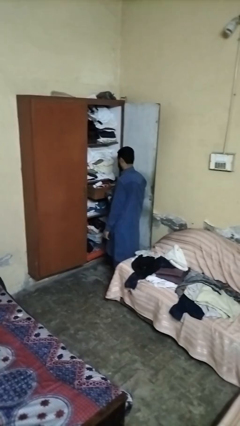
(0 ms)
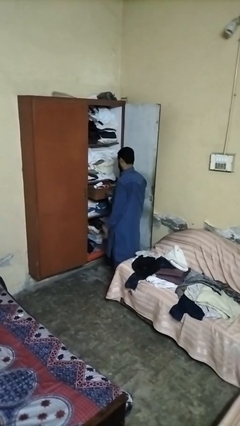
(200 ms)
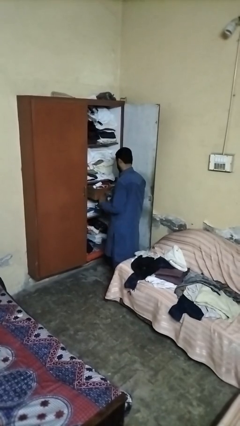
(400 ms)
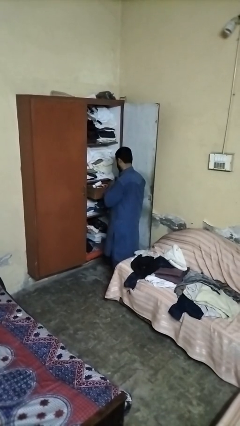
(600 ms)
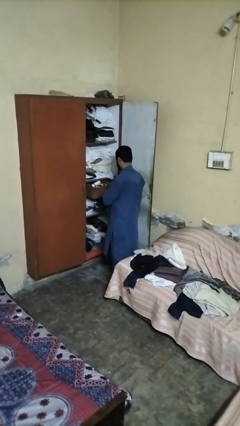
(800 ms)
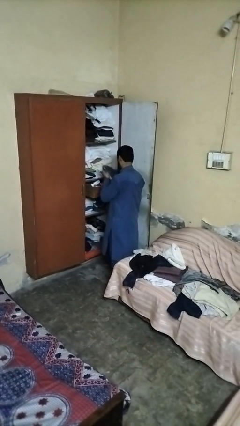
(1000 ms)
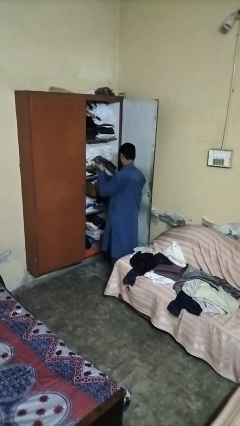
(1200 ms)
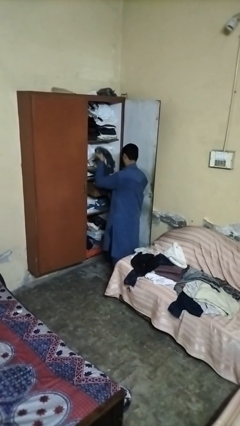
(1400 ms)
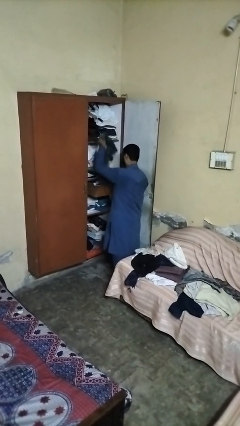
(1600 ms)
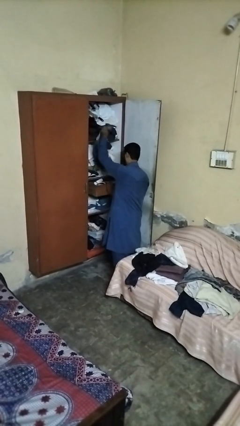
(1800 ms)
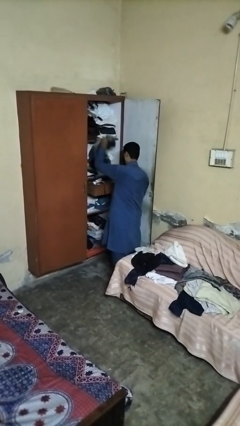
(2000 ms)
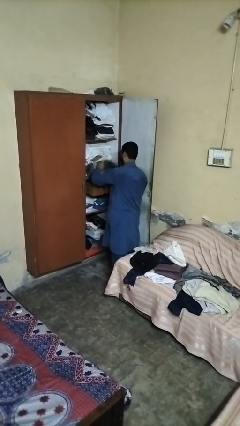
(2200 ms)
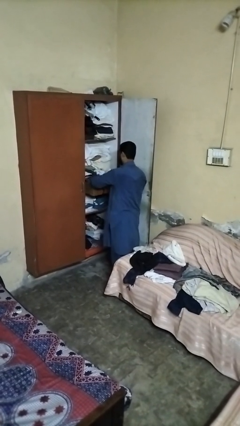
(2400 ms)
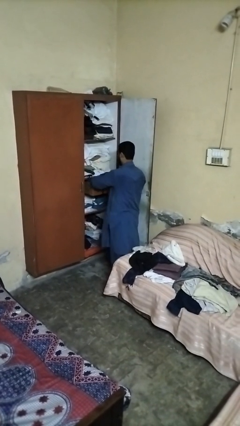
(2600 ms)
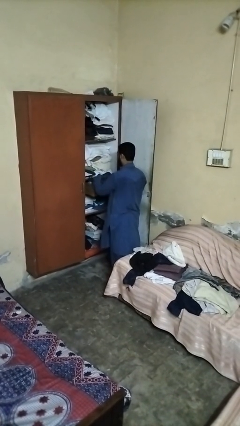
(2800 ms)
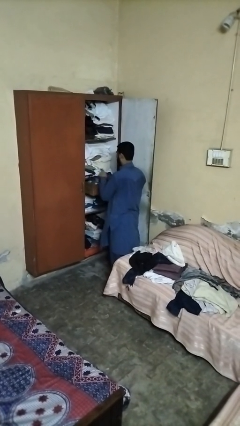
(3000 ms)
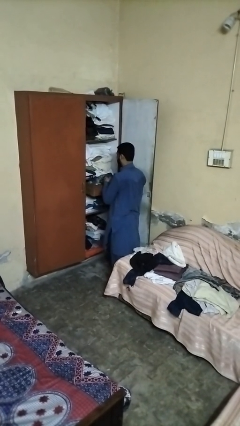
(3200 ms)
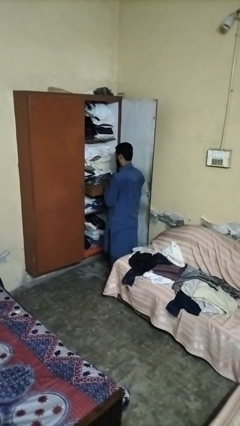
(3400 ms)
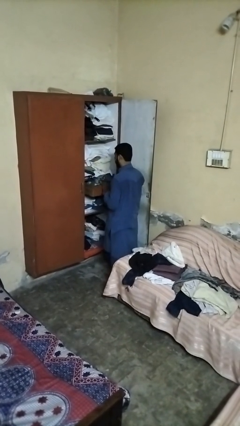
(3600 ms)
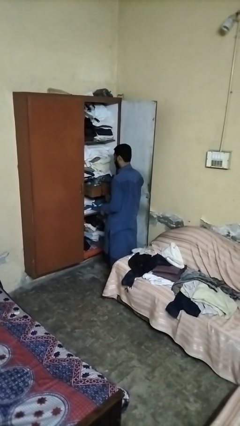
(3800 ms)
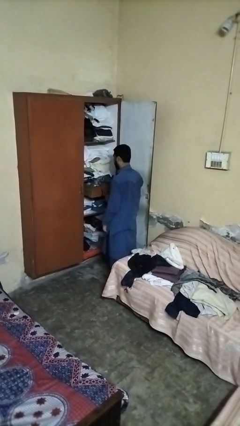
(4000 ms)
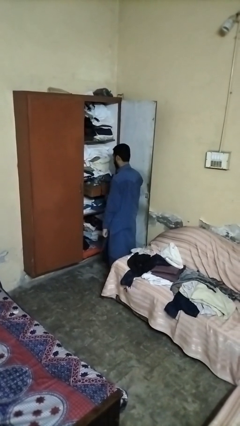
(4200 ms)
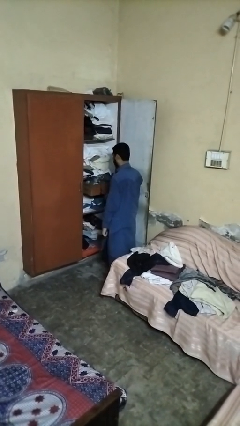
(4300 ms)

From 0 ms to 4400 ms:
person puts clothes into dresser

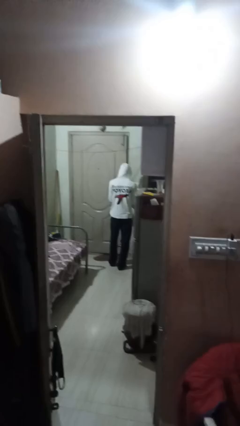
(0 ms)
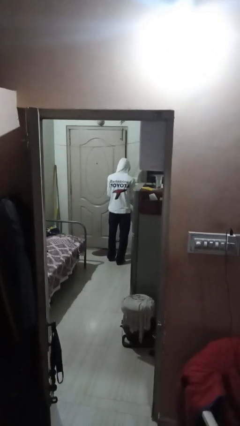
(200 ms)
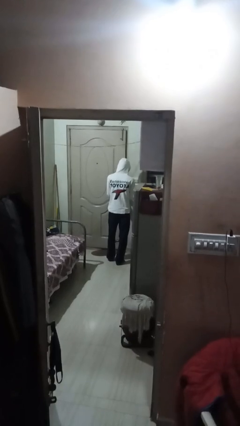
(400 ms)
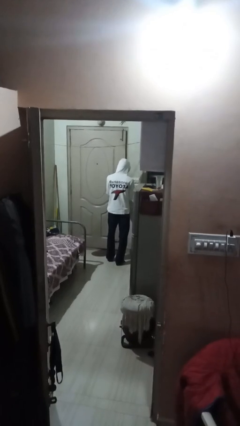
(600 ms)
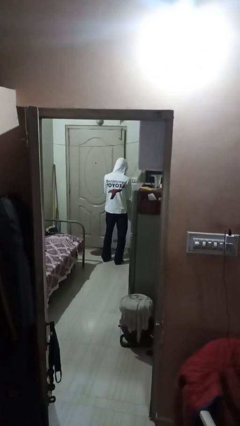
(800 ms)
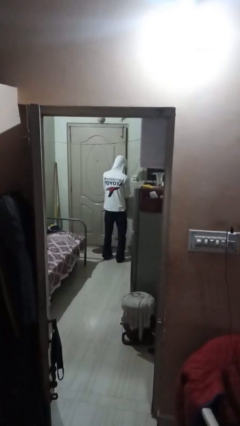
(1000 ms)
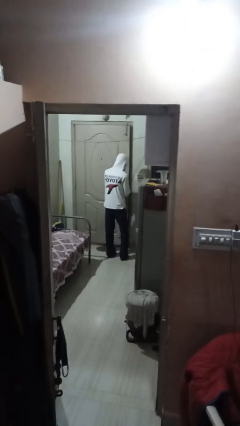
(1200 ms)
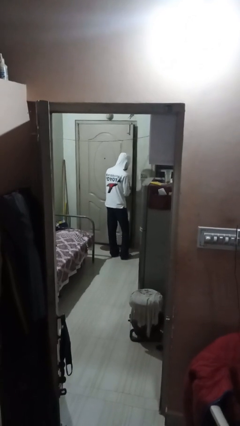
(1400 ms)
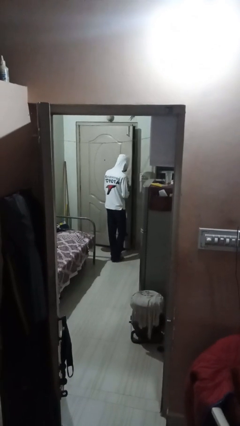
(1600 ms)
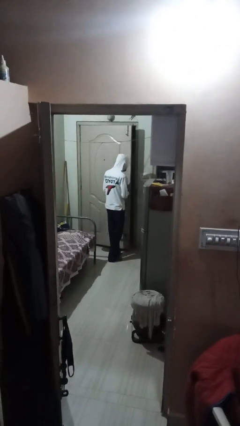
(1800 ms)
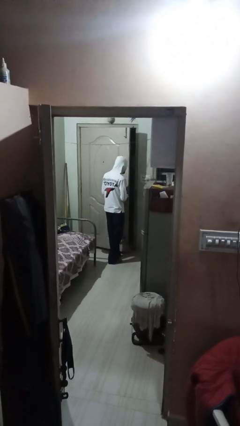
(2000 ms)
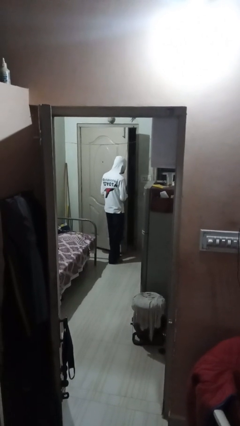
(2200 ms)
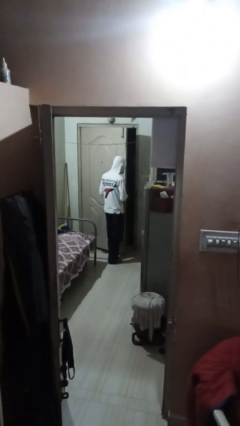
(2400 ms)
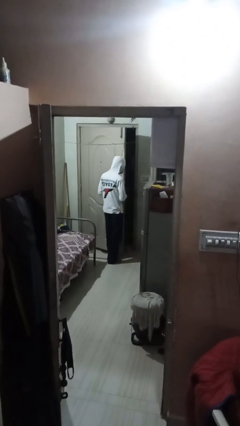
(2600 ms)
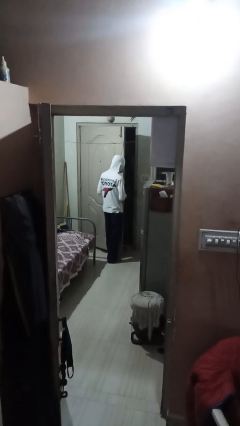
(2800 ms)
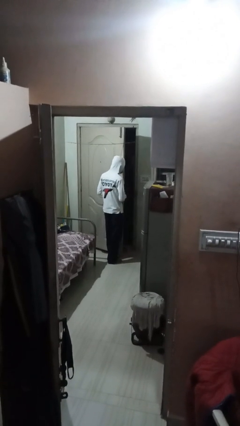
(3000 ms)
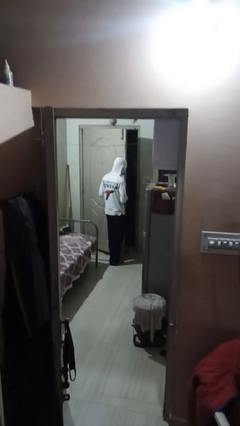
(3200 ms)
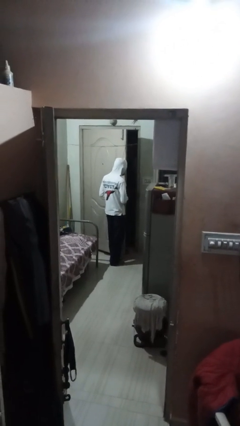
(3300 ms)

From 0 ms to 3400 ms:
person opens facility door

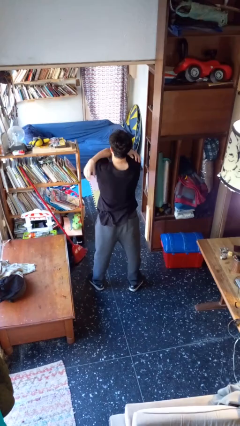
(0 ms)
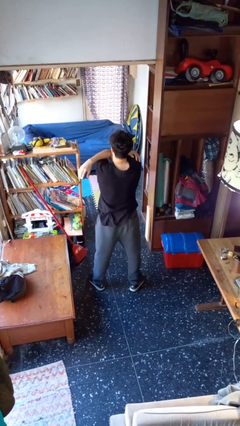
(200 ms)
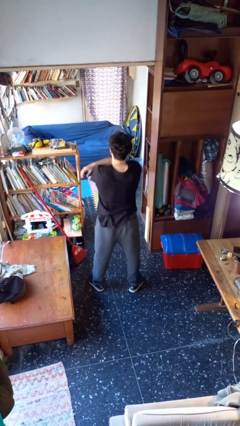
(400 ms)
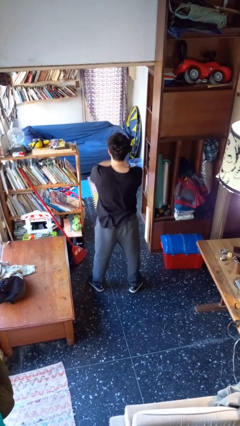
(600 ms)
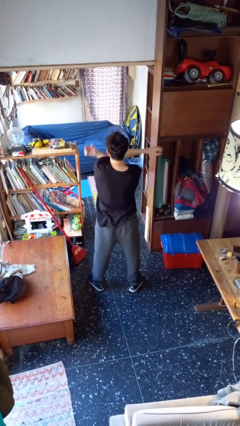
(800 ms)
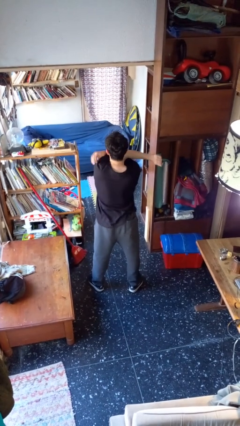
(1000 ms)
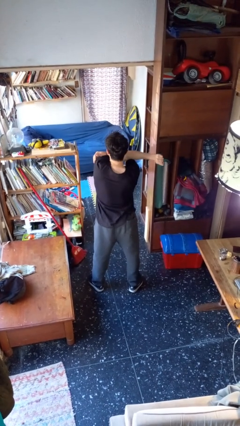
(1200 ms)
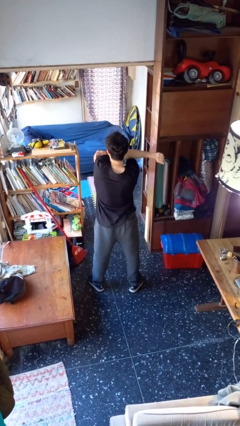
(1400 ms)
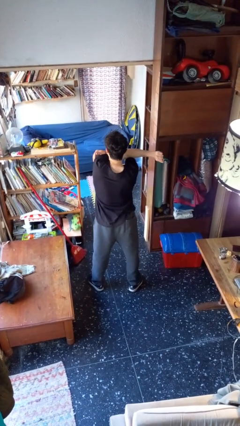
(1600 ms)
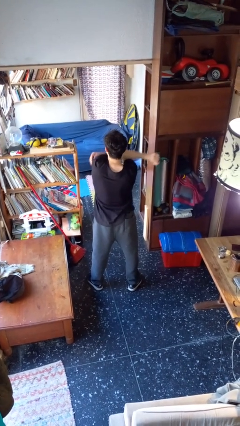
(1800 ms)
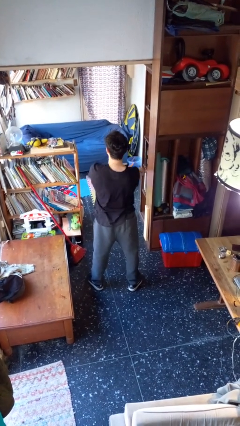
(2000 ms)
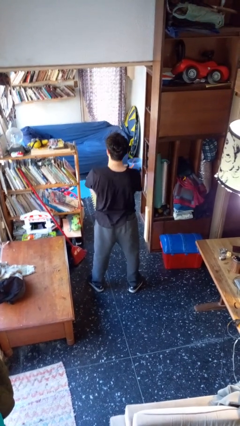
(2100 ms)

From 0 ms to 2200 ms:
person stretches arms to side

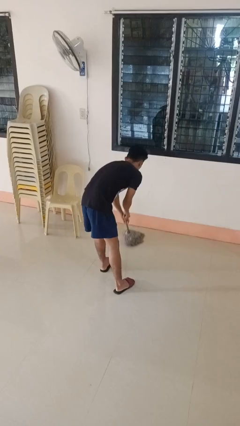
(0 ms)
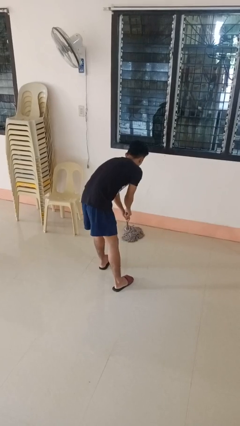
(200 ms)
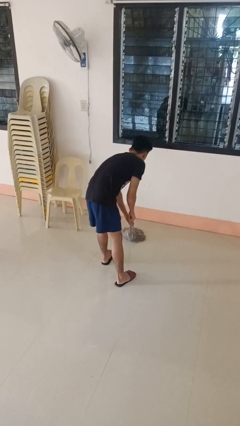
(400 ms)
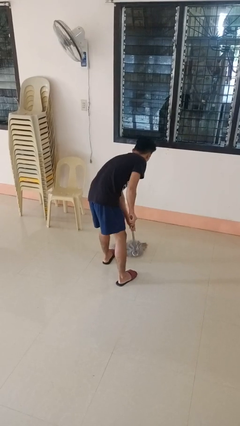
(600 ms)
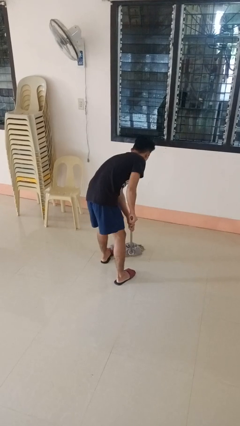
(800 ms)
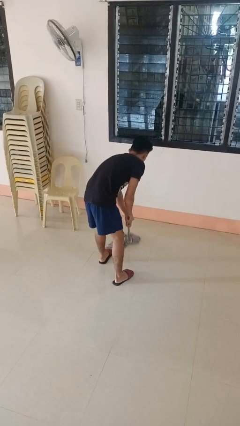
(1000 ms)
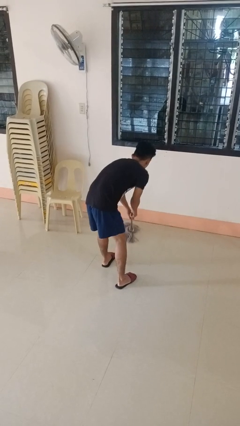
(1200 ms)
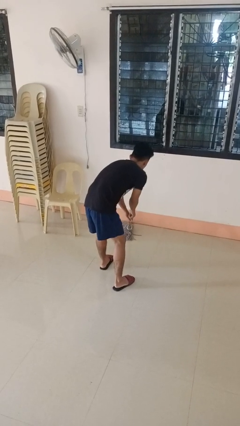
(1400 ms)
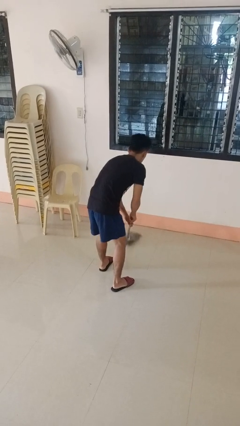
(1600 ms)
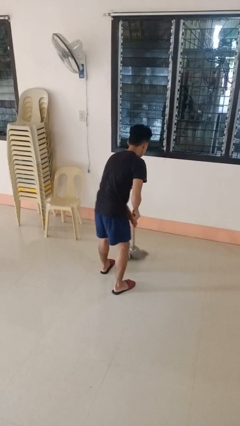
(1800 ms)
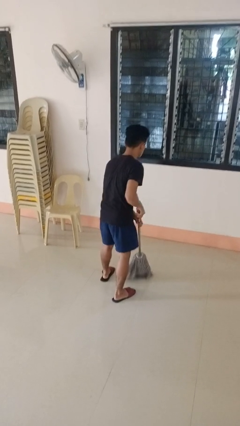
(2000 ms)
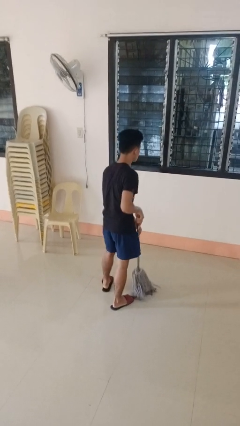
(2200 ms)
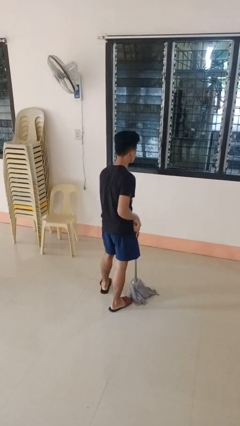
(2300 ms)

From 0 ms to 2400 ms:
person mops

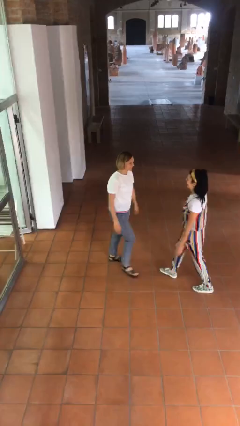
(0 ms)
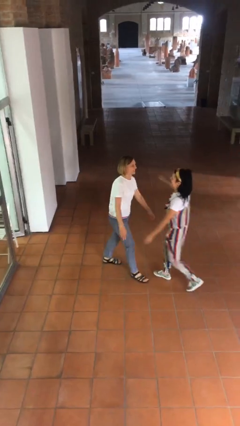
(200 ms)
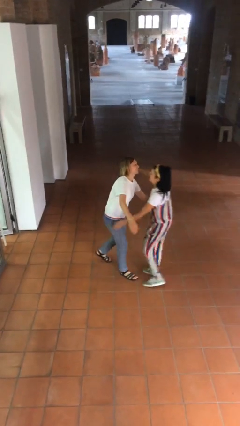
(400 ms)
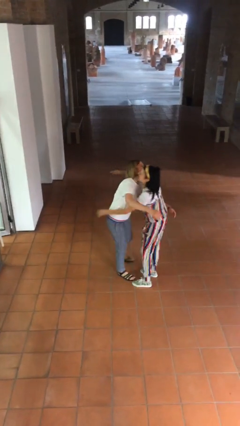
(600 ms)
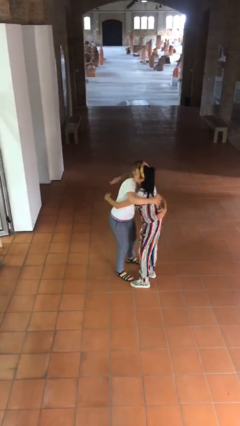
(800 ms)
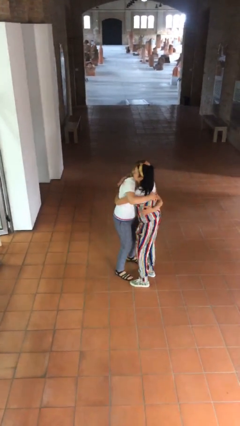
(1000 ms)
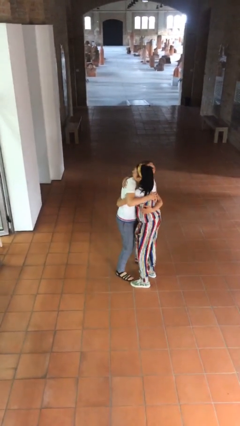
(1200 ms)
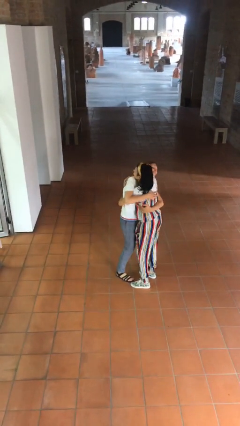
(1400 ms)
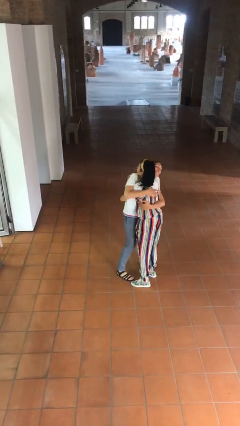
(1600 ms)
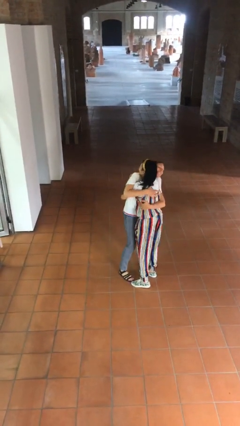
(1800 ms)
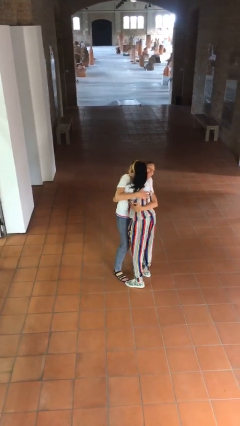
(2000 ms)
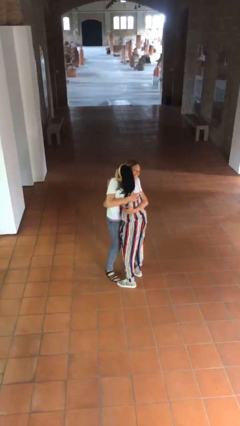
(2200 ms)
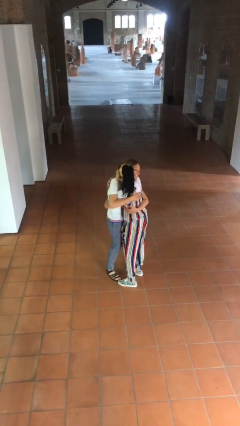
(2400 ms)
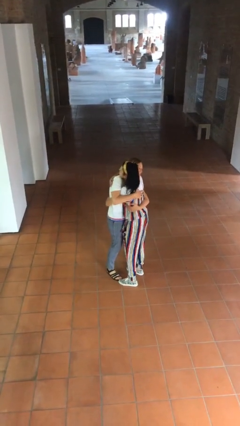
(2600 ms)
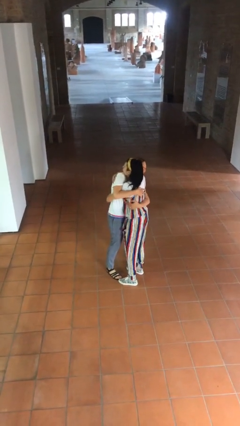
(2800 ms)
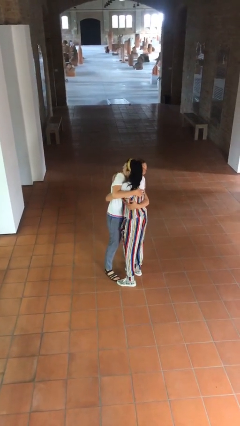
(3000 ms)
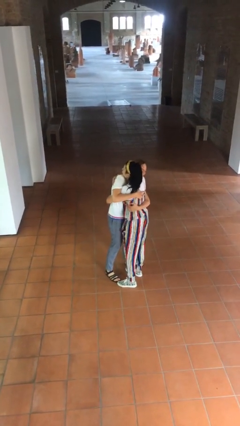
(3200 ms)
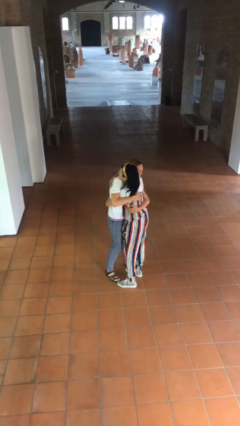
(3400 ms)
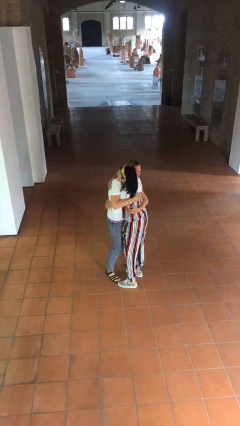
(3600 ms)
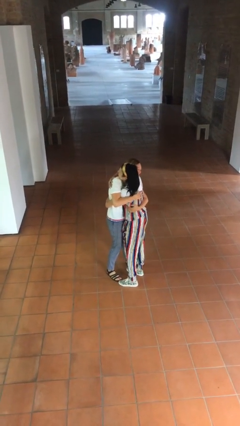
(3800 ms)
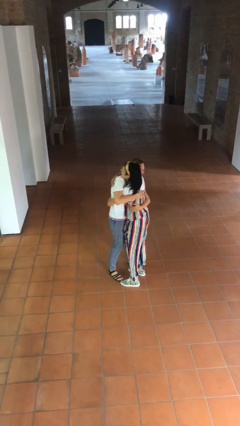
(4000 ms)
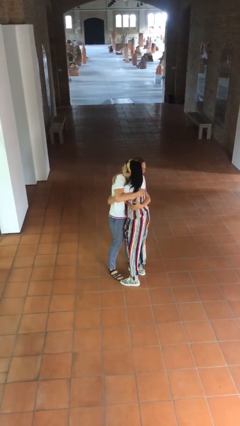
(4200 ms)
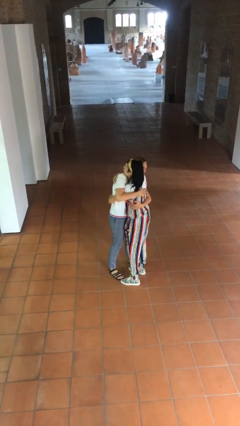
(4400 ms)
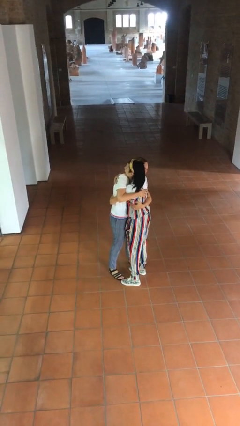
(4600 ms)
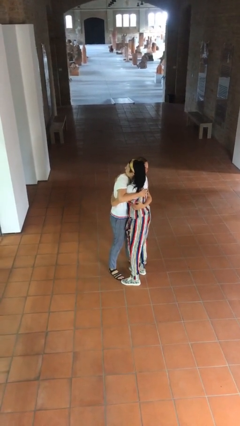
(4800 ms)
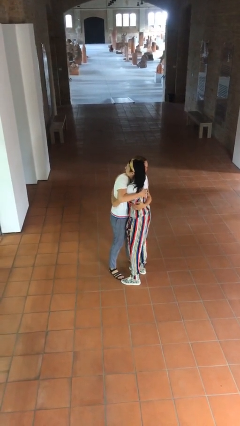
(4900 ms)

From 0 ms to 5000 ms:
person embraces person

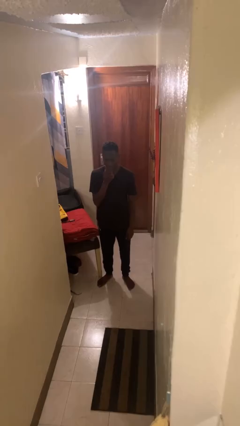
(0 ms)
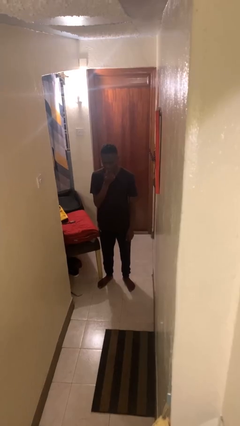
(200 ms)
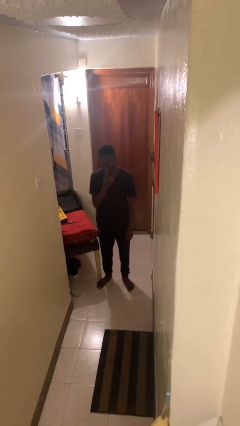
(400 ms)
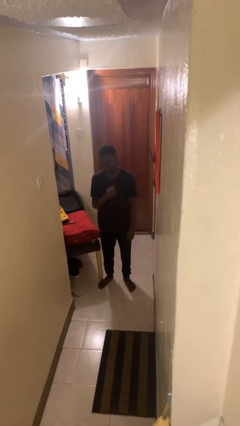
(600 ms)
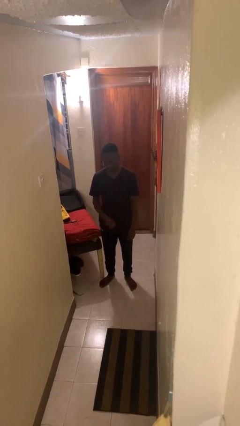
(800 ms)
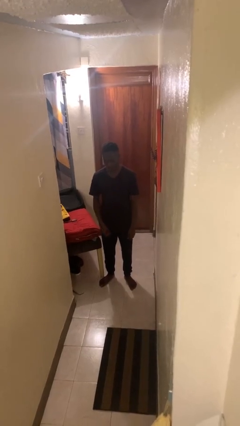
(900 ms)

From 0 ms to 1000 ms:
person licks fingers
